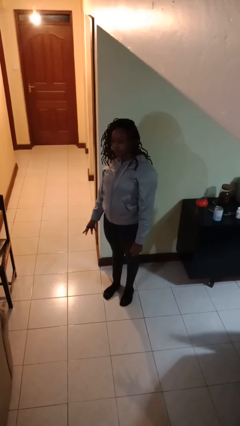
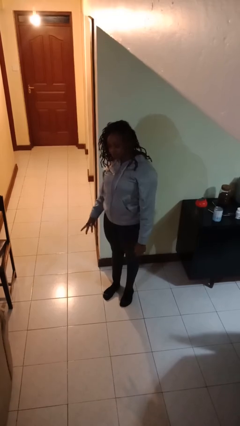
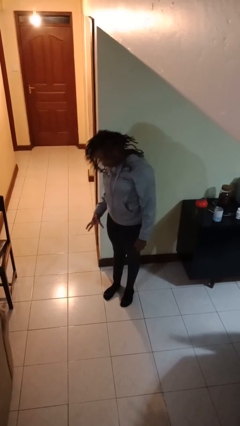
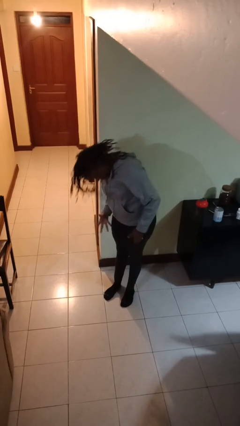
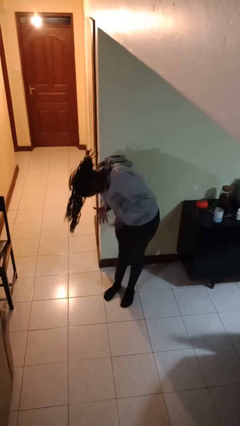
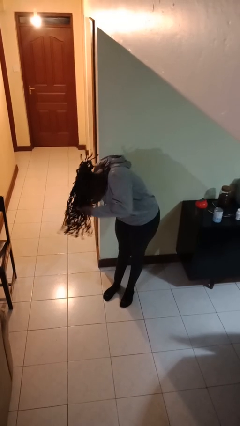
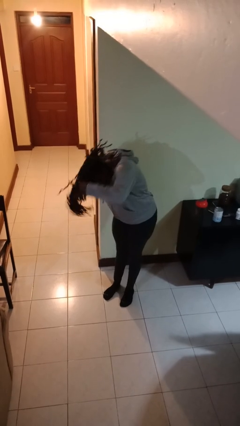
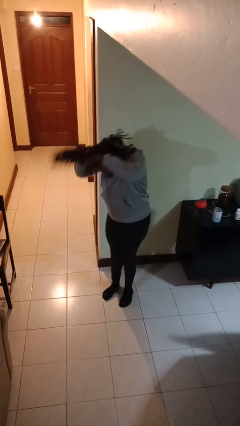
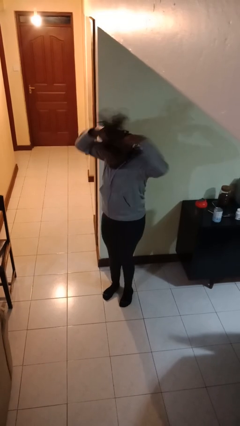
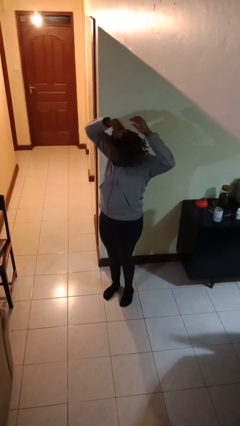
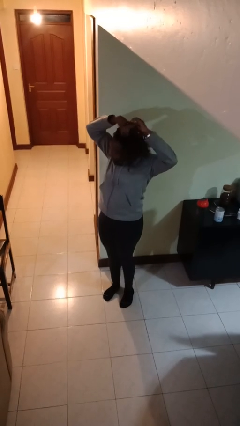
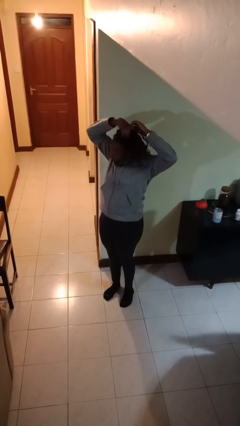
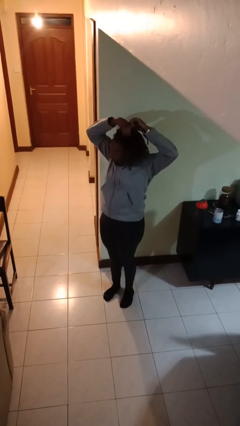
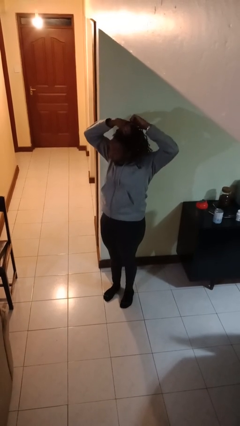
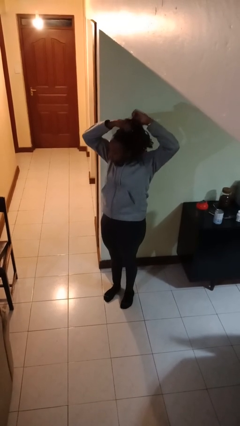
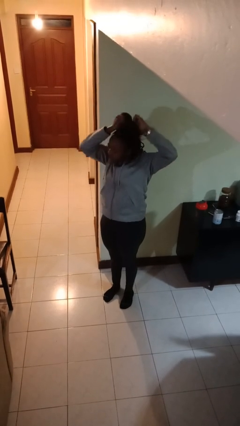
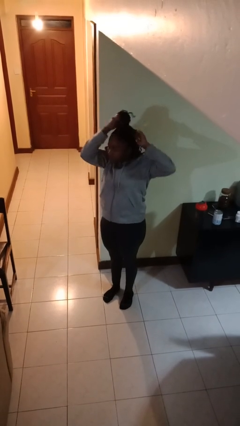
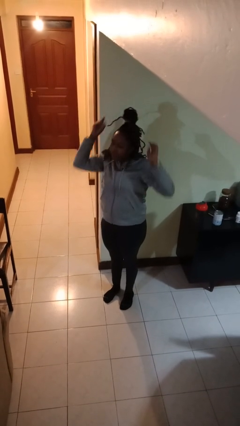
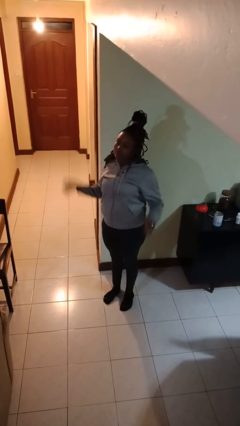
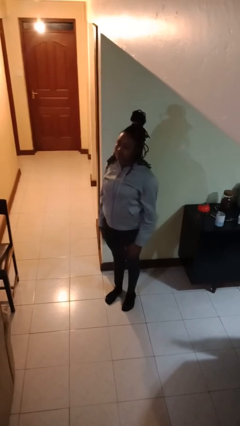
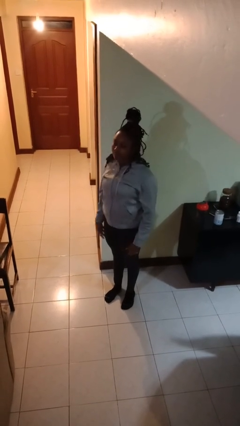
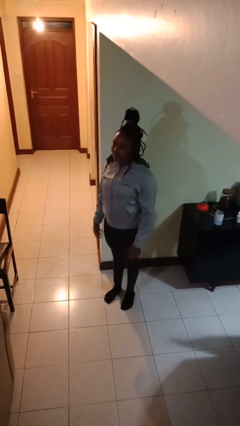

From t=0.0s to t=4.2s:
person puts hair in ponytail

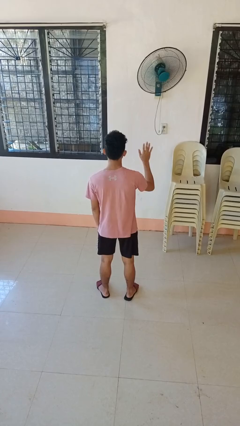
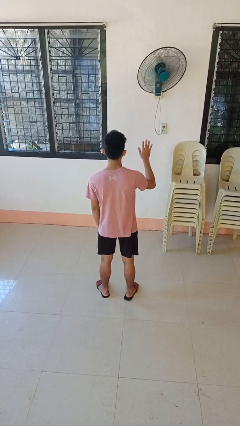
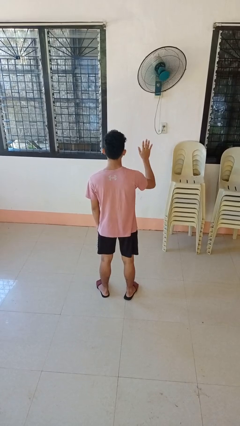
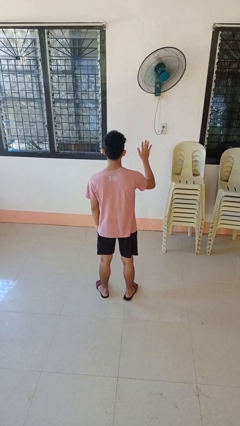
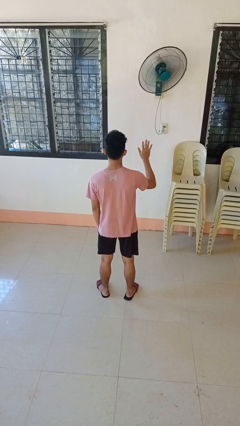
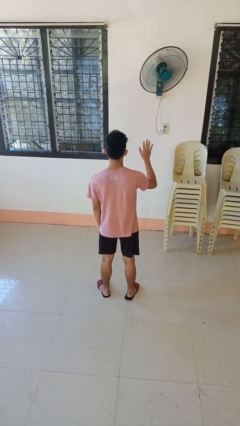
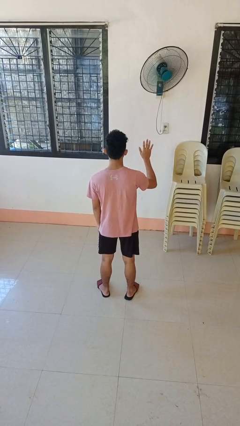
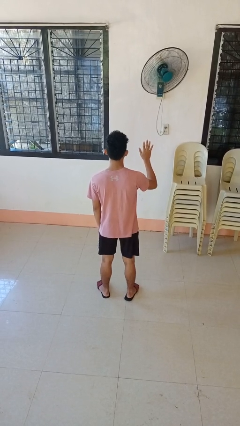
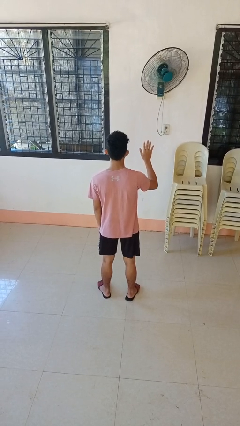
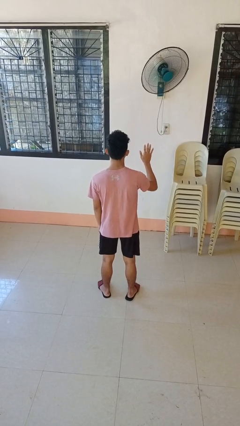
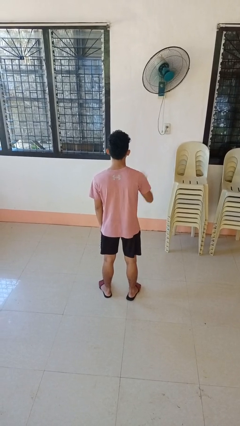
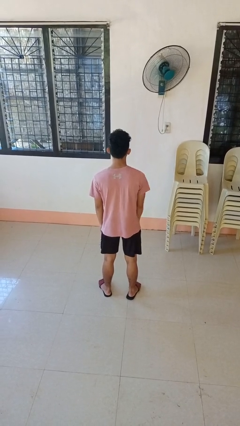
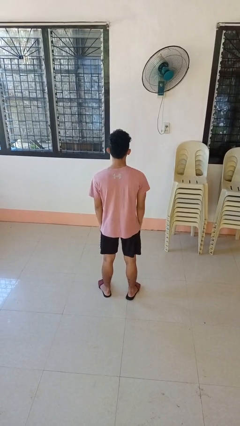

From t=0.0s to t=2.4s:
person gestures number five

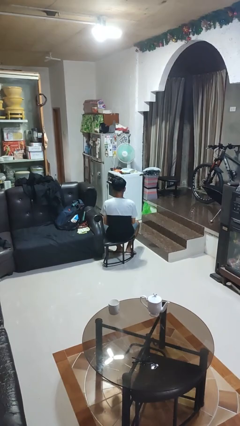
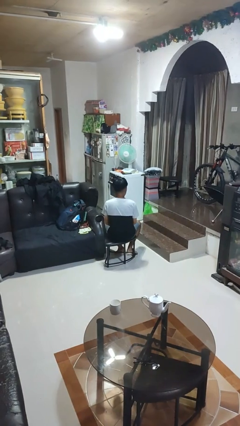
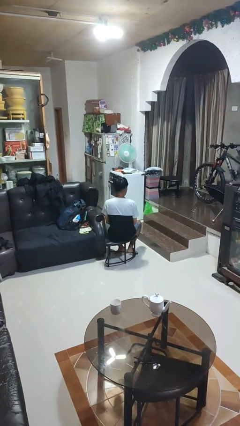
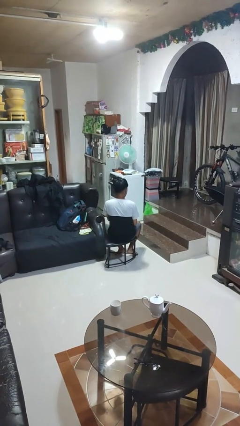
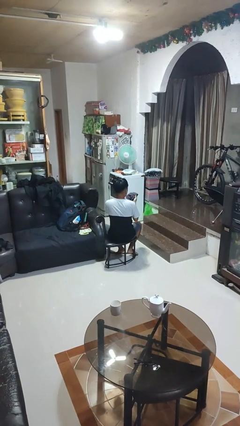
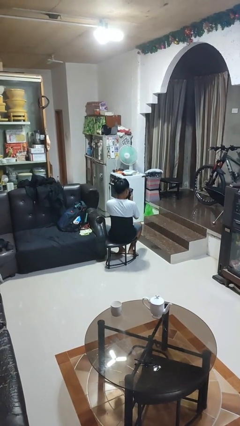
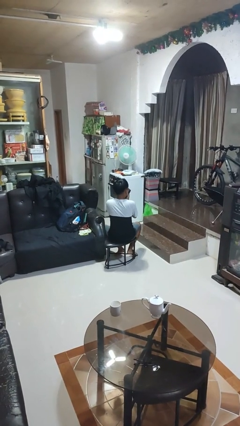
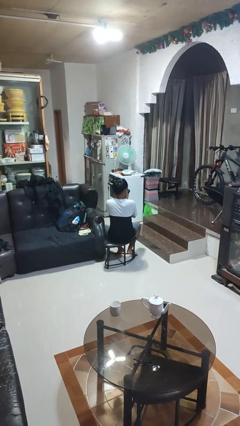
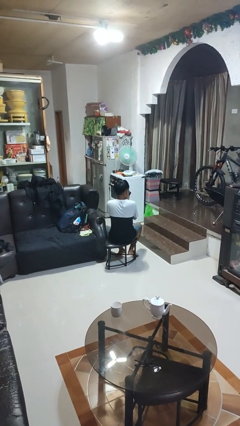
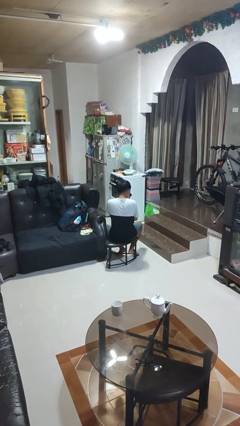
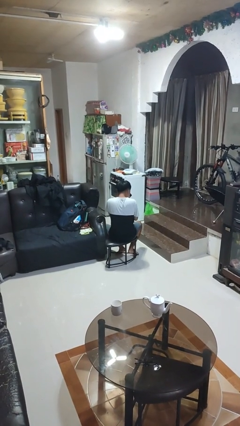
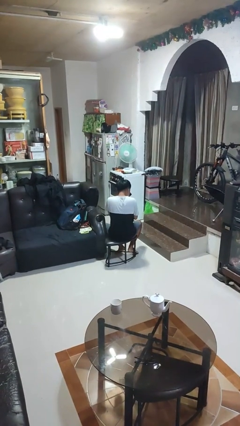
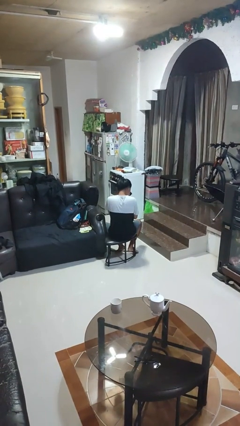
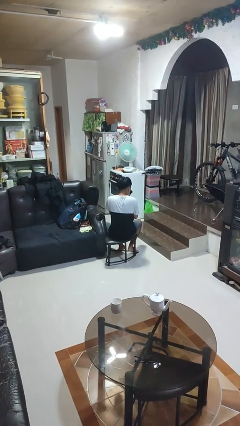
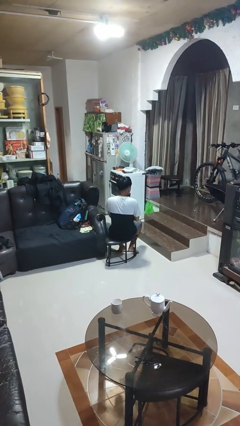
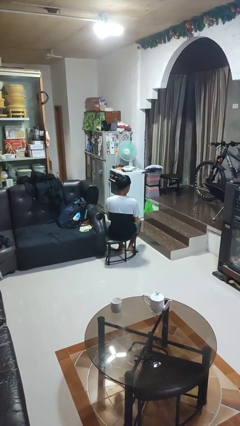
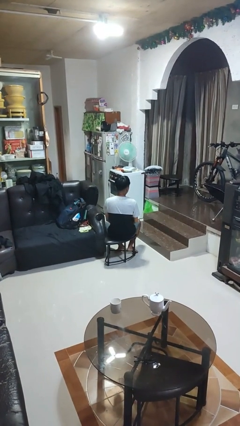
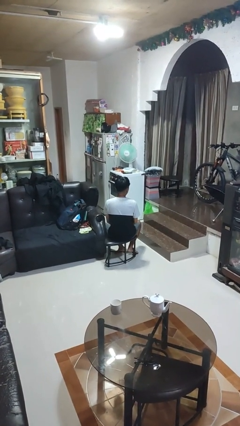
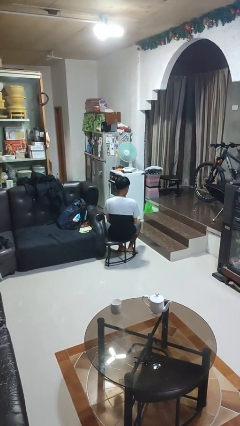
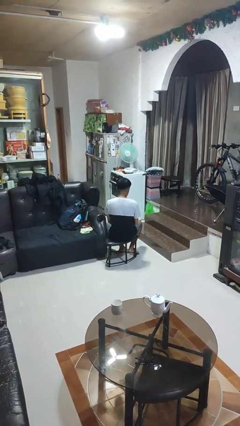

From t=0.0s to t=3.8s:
person dries hair with hairdryer

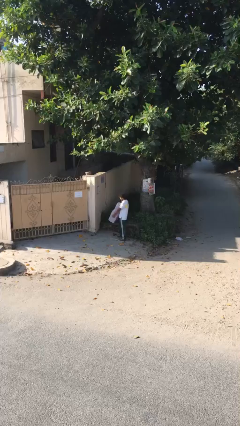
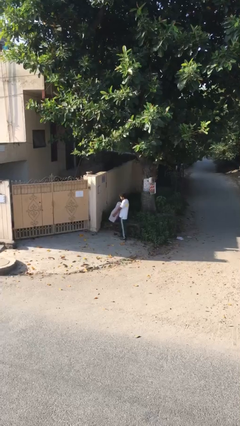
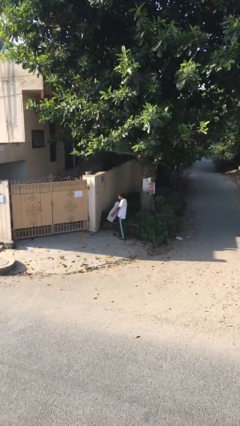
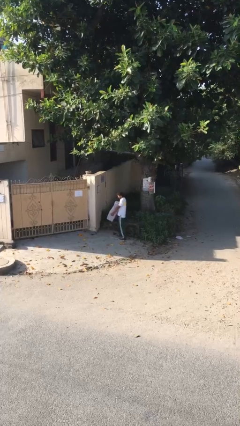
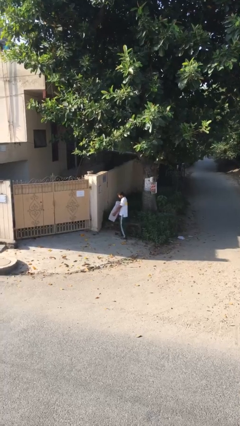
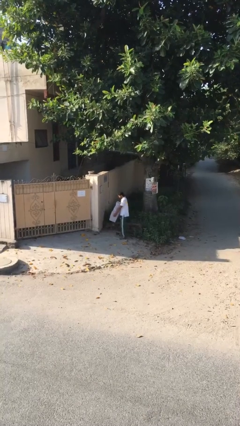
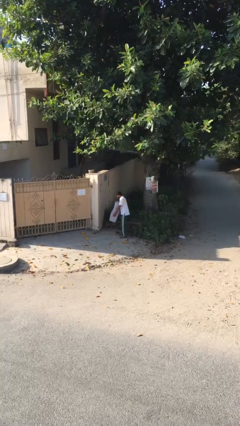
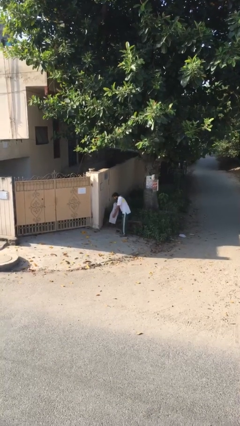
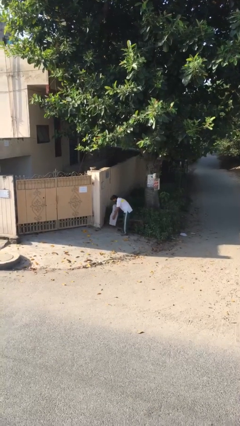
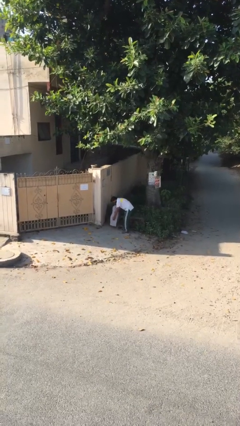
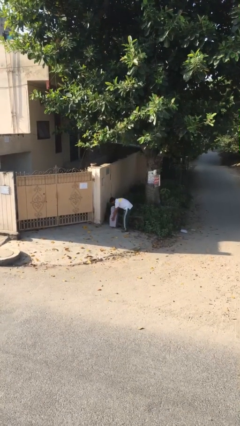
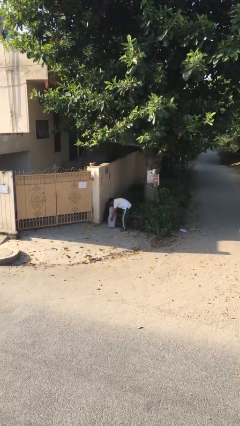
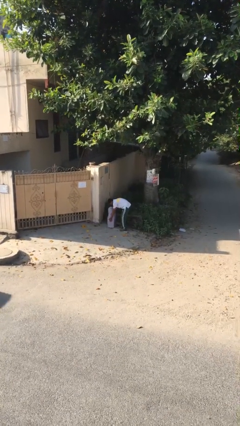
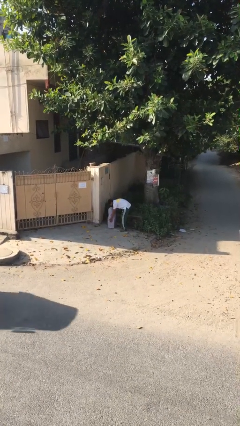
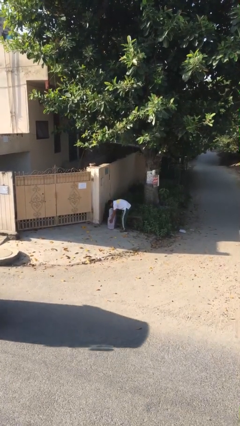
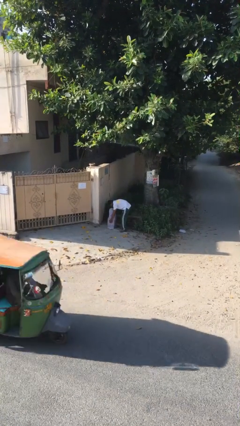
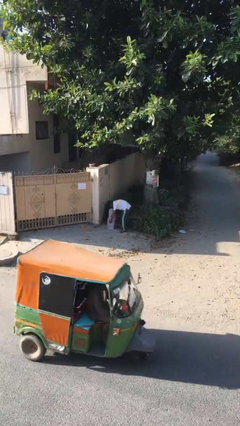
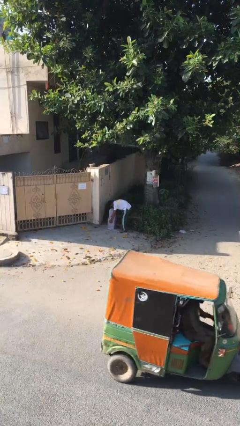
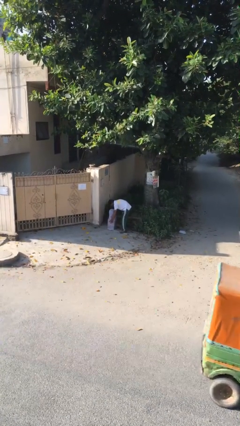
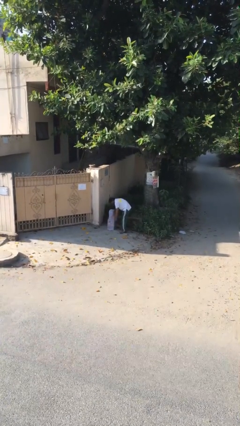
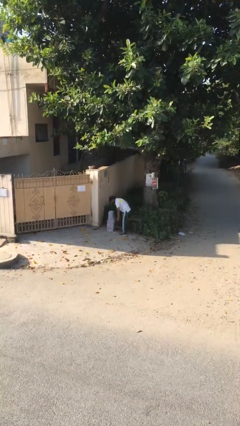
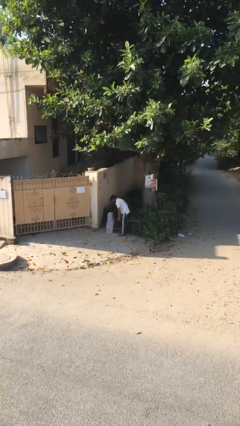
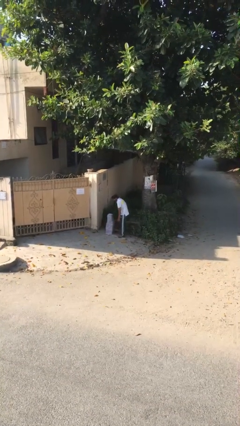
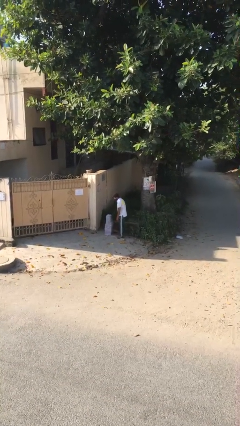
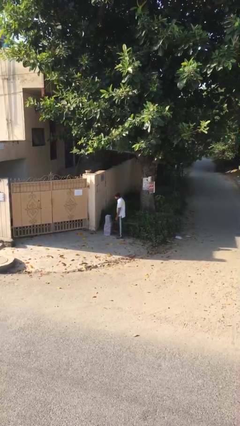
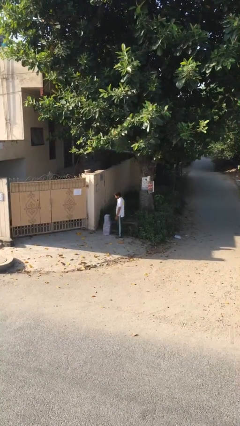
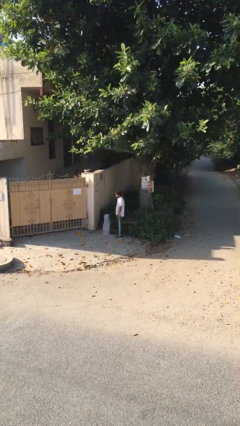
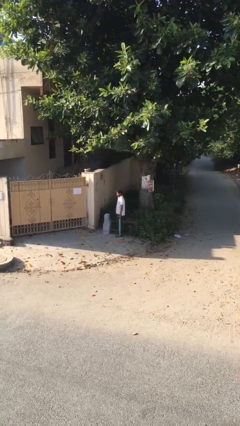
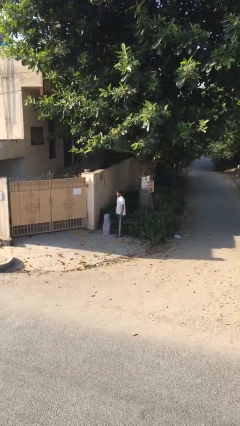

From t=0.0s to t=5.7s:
person puts down object on floor

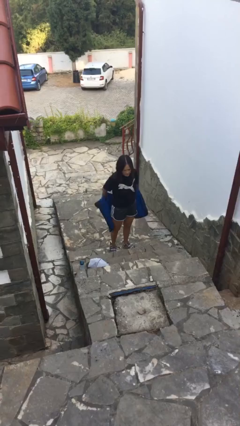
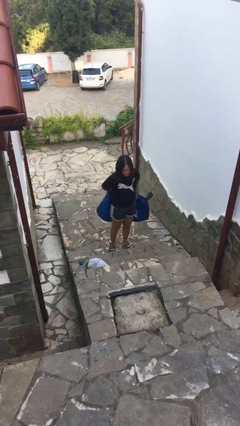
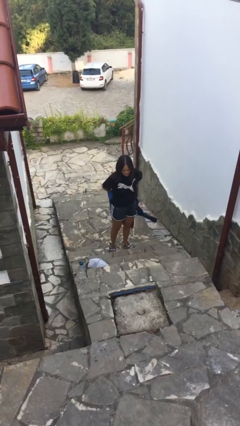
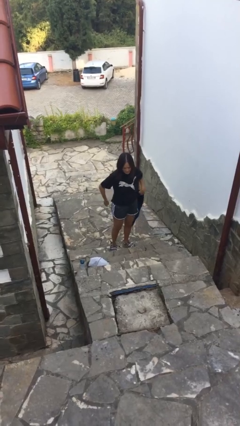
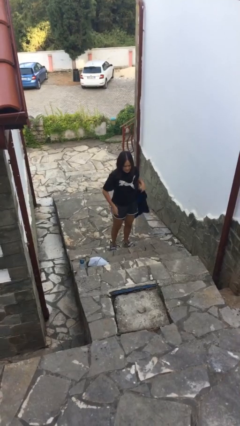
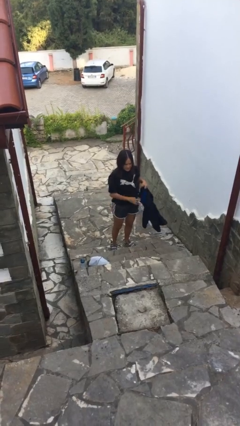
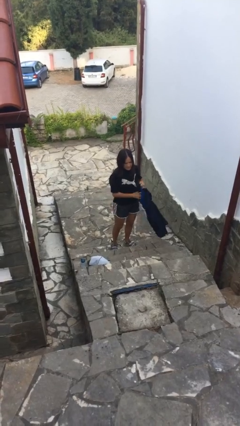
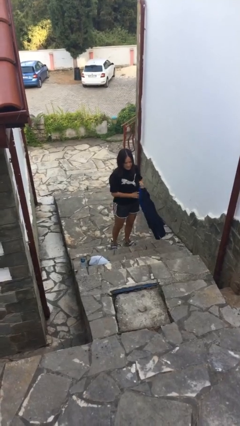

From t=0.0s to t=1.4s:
person takes off jacket
